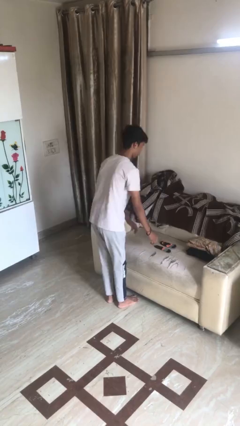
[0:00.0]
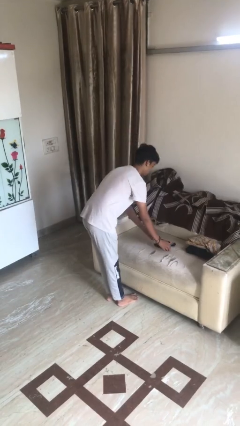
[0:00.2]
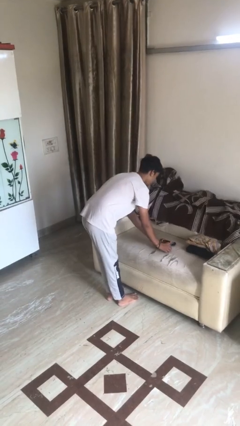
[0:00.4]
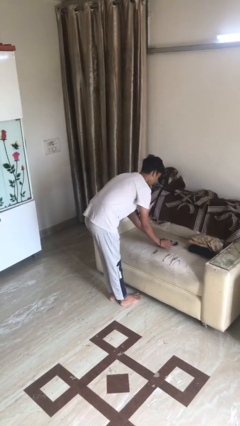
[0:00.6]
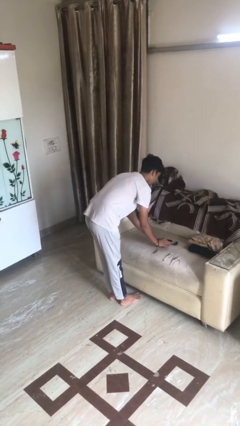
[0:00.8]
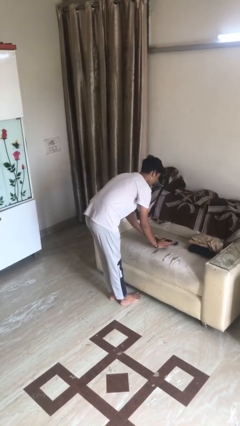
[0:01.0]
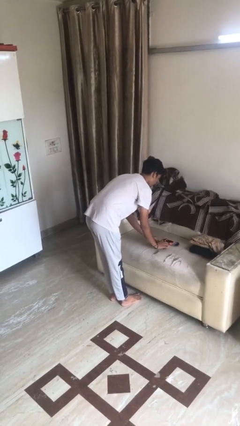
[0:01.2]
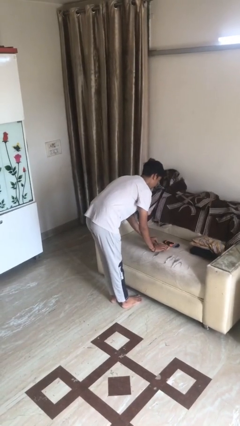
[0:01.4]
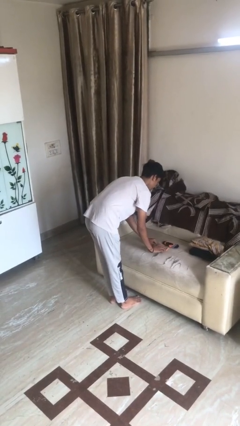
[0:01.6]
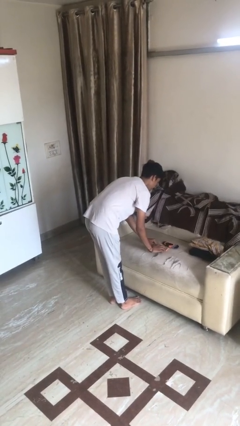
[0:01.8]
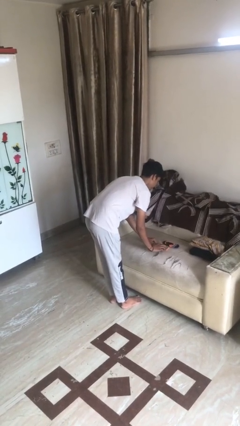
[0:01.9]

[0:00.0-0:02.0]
person folds socks

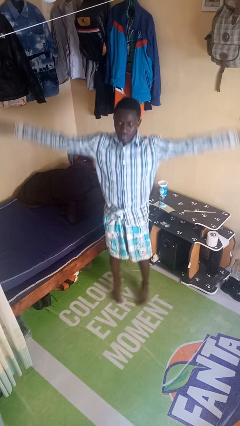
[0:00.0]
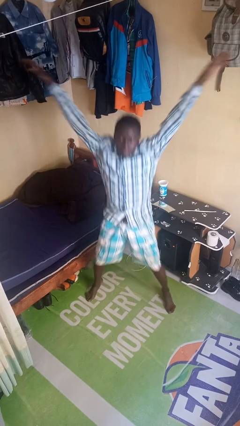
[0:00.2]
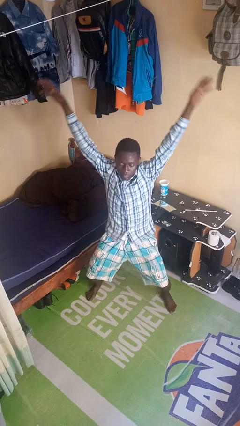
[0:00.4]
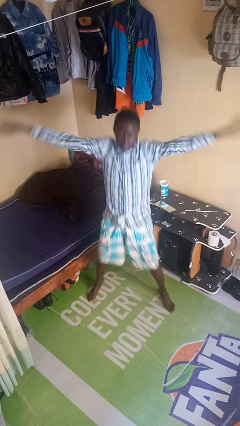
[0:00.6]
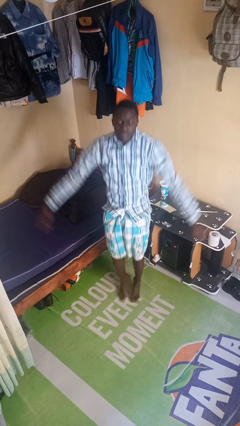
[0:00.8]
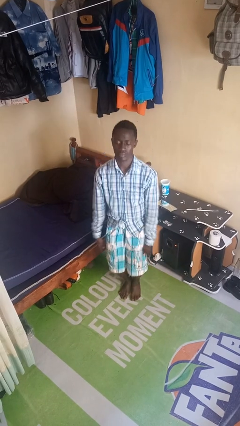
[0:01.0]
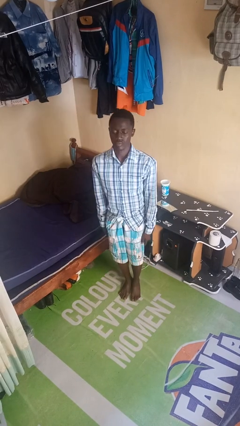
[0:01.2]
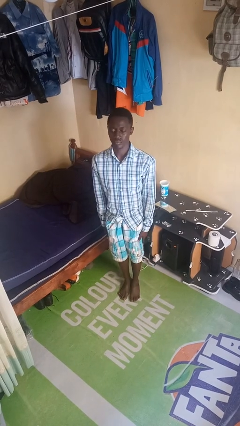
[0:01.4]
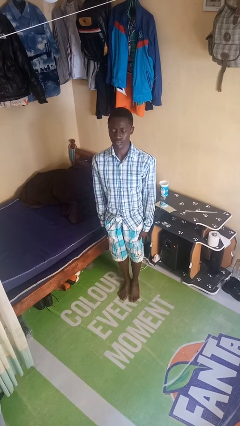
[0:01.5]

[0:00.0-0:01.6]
person exercises with jumping jacks

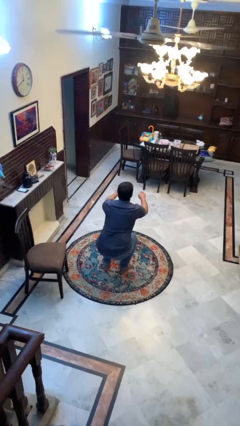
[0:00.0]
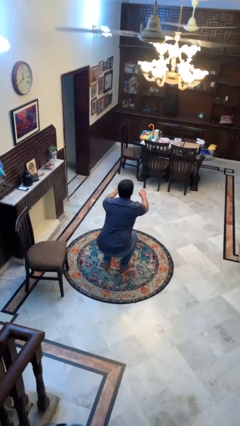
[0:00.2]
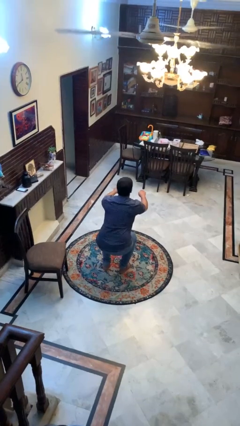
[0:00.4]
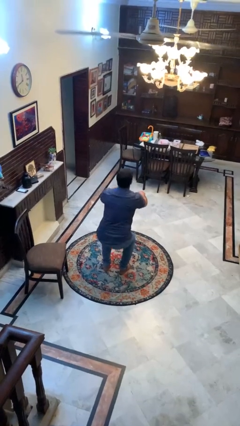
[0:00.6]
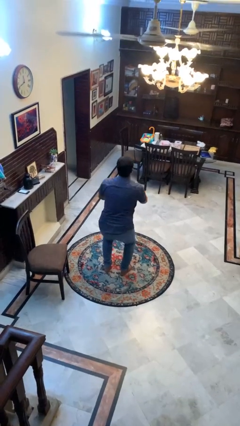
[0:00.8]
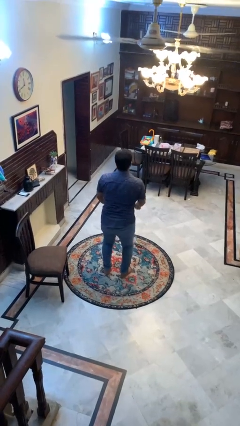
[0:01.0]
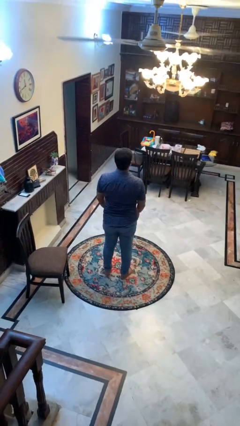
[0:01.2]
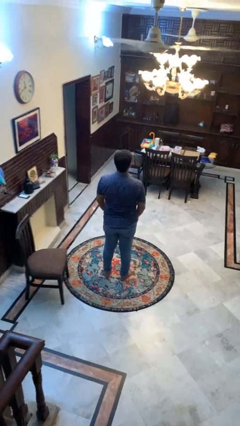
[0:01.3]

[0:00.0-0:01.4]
person stands up

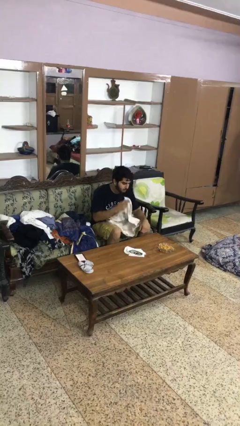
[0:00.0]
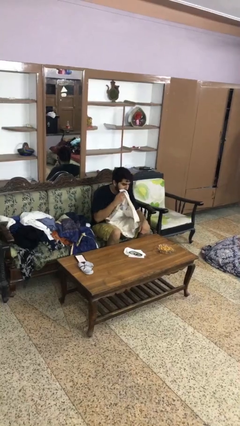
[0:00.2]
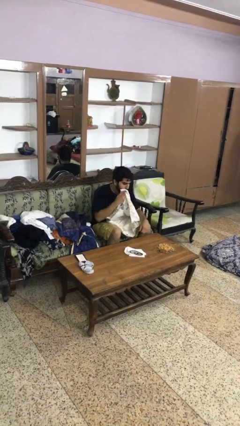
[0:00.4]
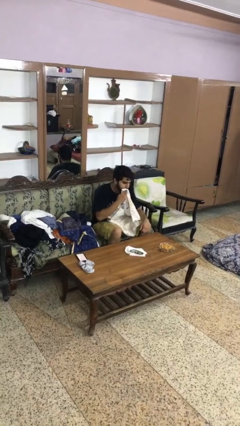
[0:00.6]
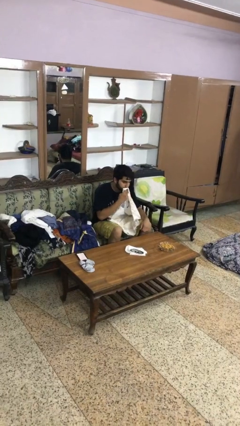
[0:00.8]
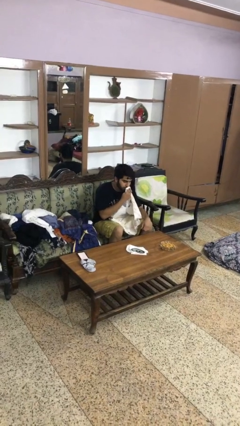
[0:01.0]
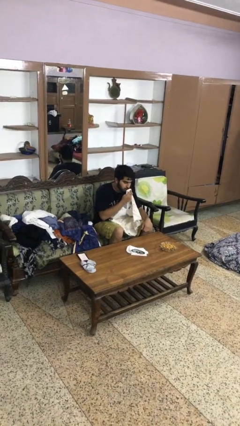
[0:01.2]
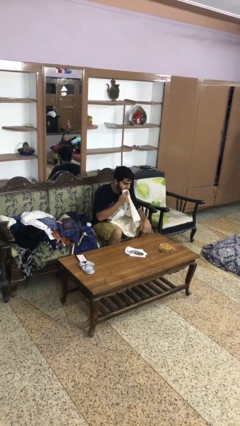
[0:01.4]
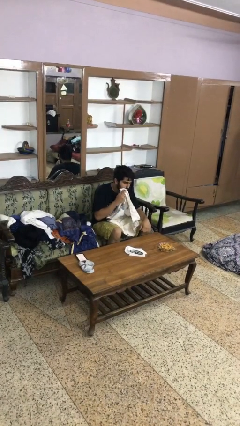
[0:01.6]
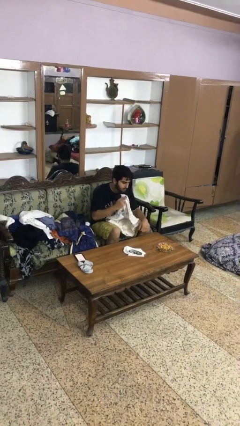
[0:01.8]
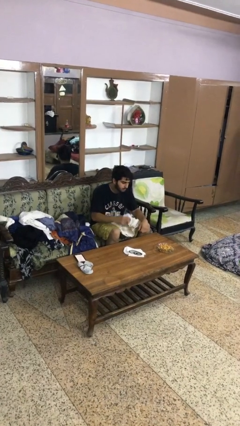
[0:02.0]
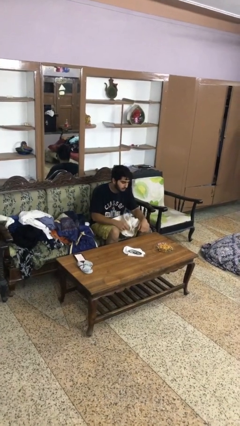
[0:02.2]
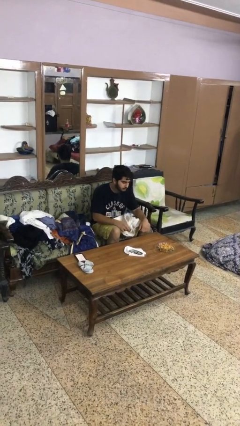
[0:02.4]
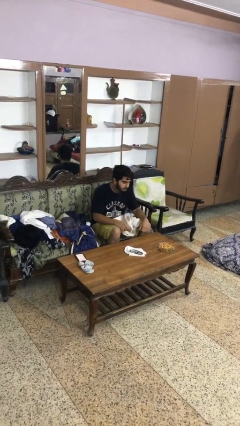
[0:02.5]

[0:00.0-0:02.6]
person wipes mouth with napkin

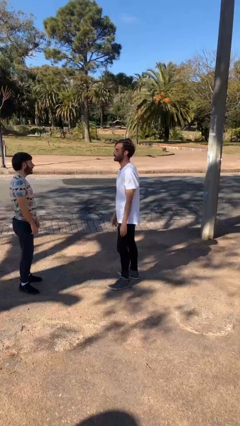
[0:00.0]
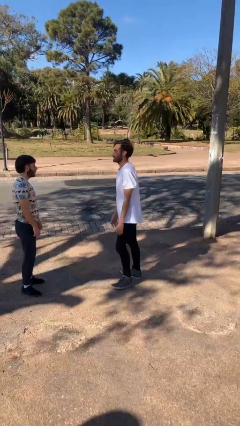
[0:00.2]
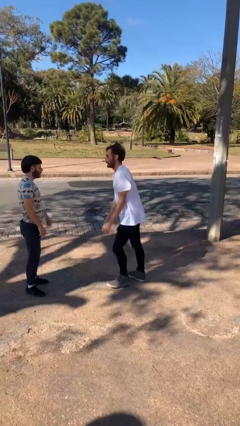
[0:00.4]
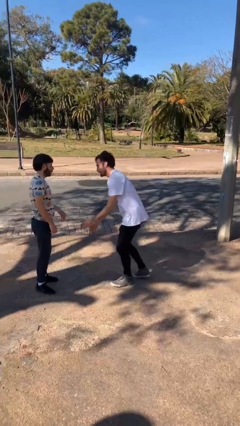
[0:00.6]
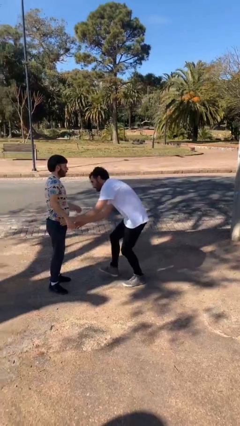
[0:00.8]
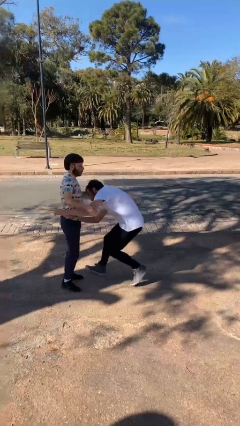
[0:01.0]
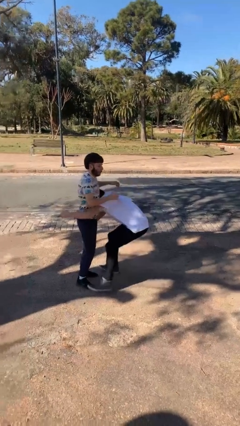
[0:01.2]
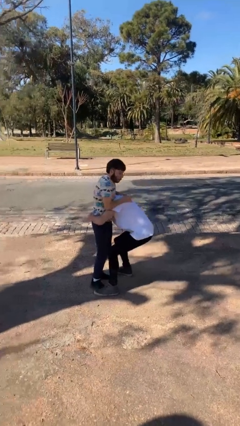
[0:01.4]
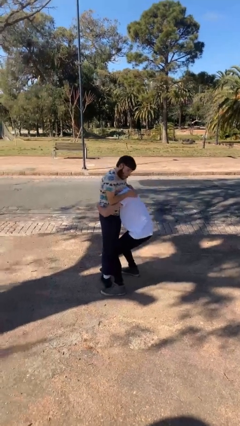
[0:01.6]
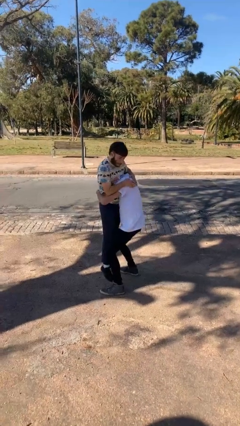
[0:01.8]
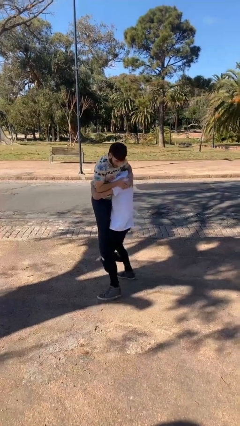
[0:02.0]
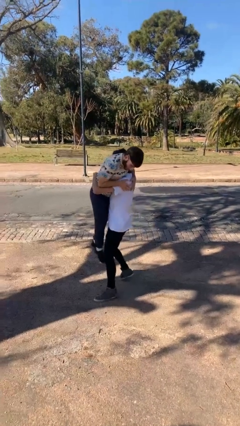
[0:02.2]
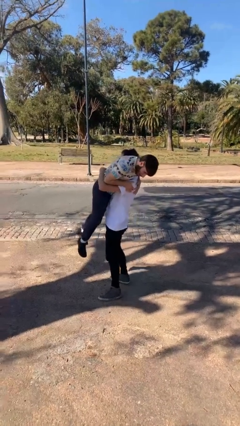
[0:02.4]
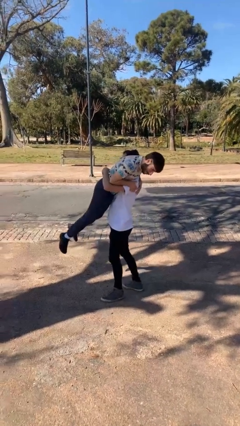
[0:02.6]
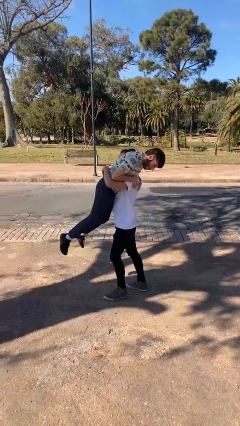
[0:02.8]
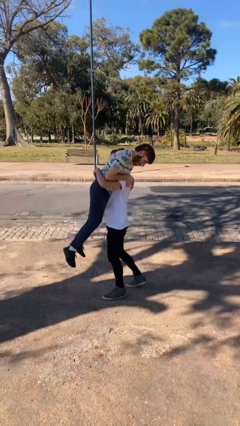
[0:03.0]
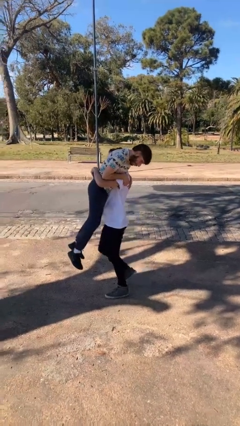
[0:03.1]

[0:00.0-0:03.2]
person carries person over shoulder

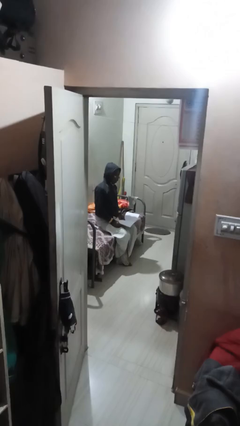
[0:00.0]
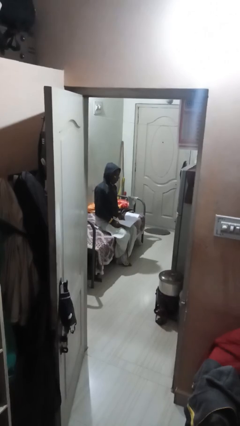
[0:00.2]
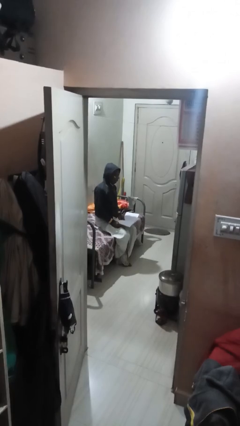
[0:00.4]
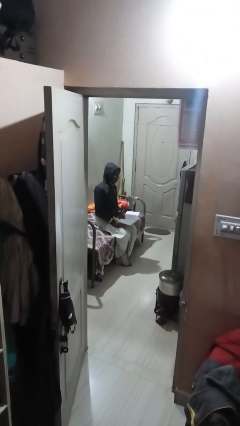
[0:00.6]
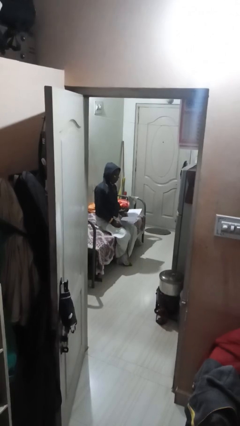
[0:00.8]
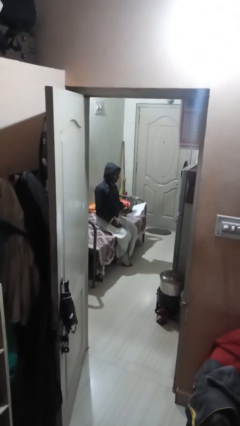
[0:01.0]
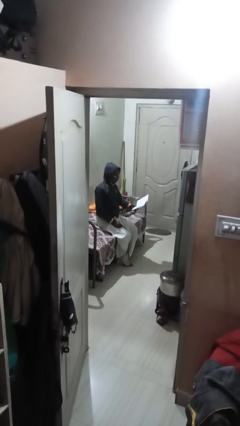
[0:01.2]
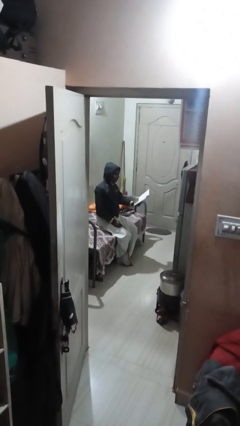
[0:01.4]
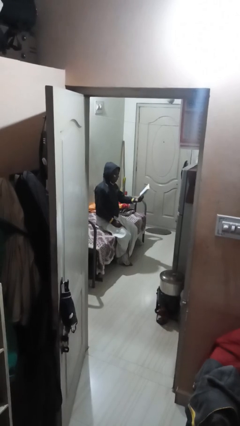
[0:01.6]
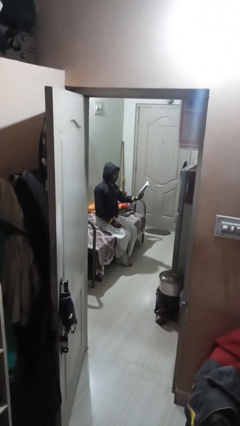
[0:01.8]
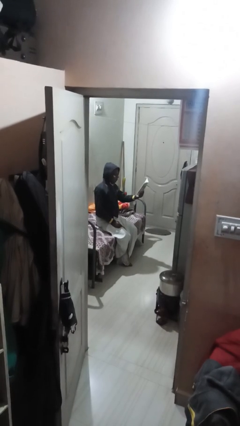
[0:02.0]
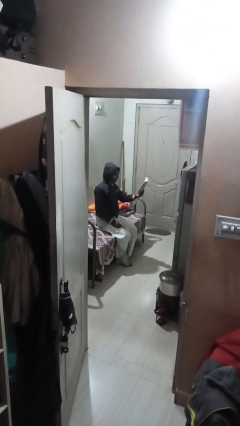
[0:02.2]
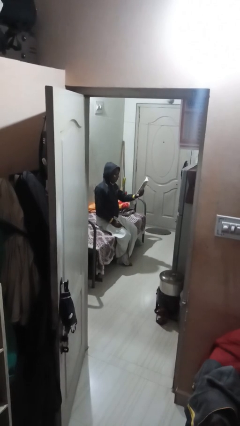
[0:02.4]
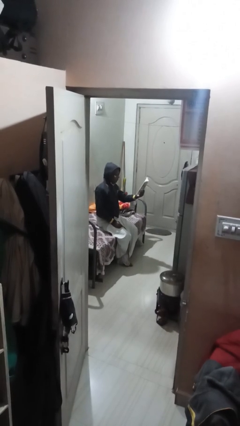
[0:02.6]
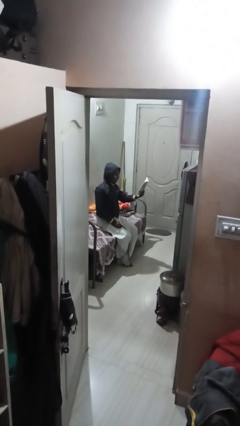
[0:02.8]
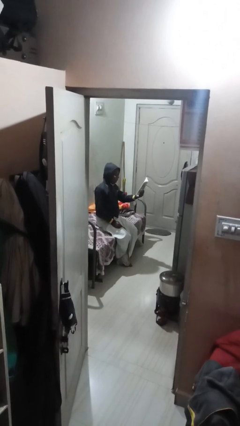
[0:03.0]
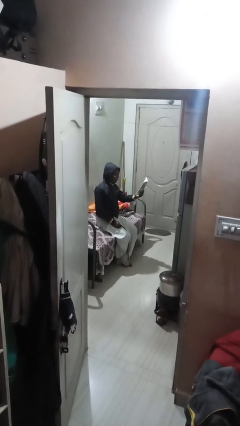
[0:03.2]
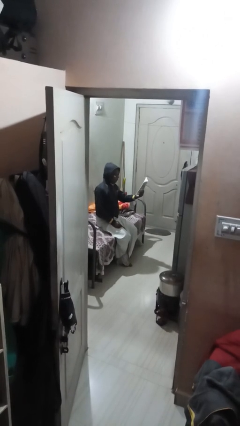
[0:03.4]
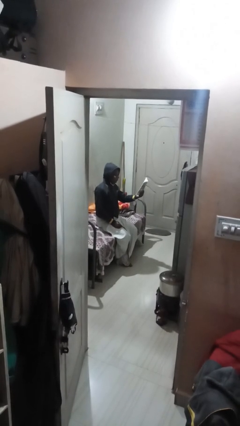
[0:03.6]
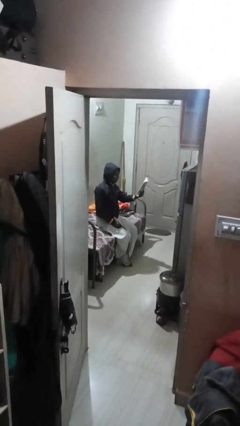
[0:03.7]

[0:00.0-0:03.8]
person reads document

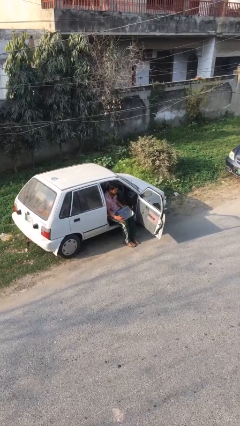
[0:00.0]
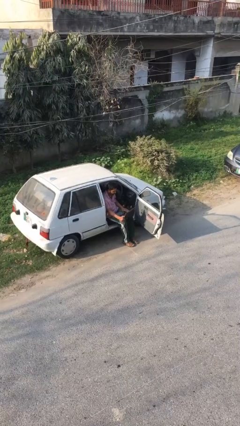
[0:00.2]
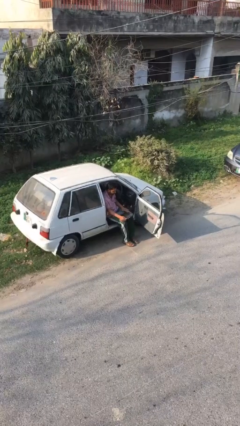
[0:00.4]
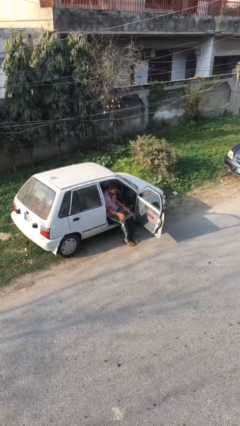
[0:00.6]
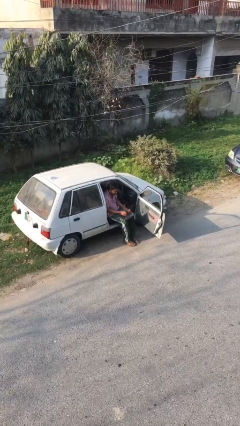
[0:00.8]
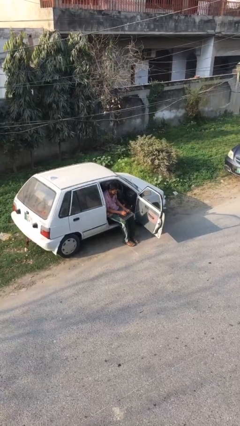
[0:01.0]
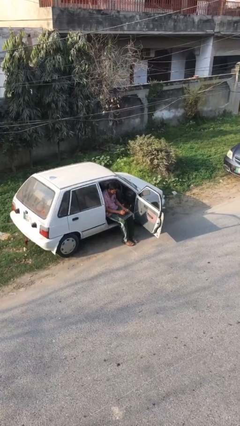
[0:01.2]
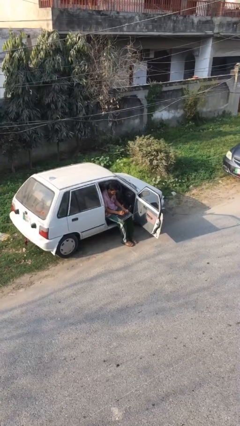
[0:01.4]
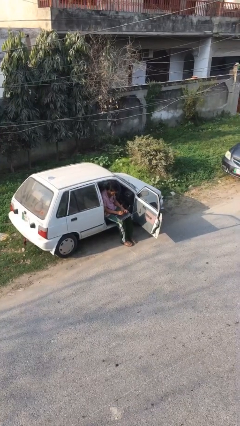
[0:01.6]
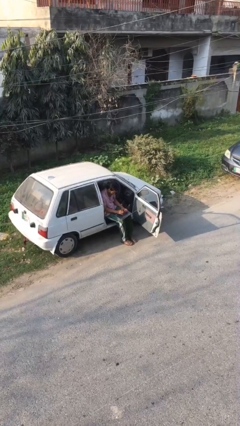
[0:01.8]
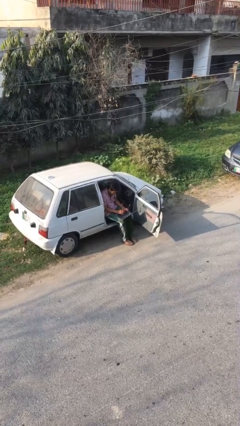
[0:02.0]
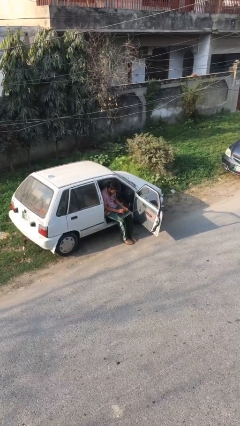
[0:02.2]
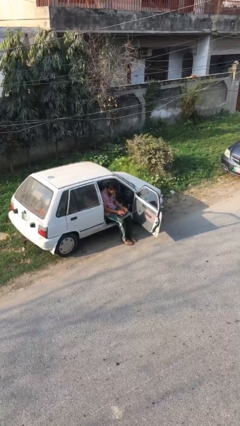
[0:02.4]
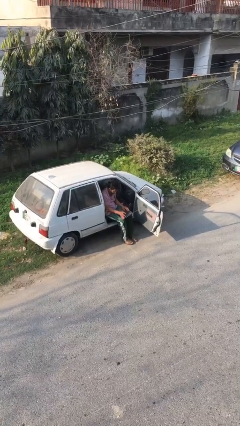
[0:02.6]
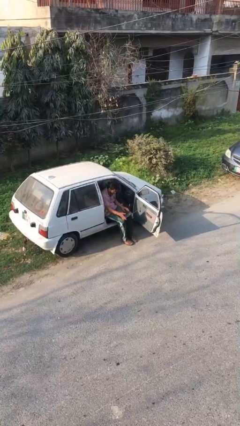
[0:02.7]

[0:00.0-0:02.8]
person interacts with laptop
